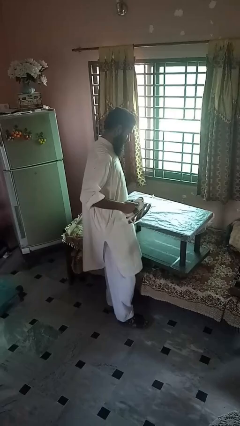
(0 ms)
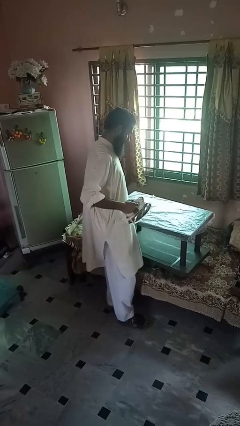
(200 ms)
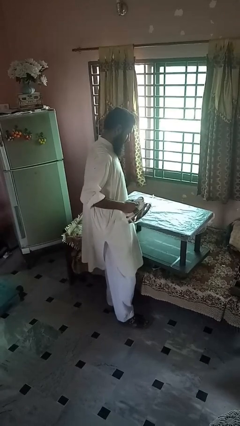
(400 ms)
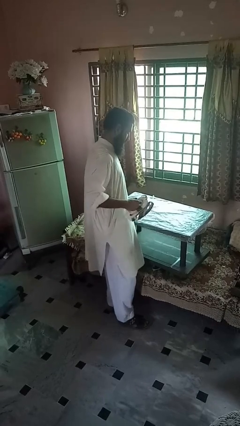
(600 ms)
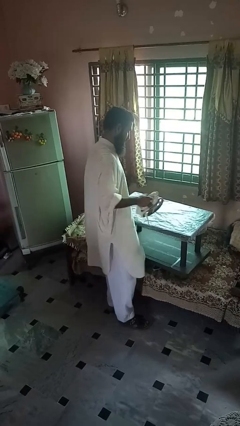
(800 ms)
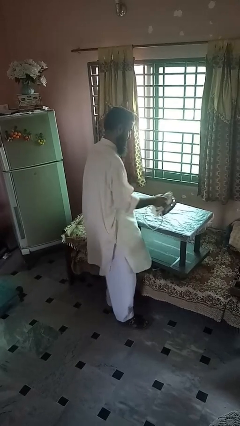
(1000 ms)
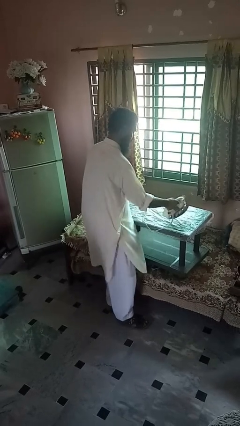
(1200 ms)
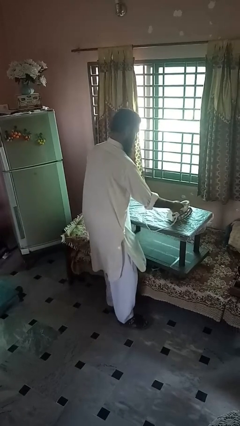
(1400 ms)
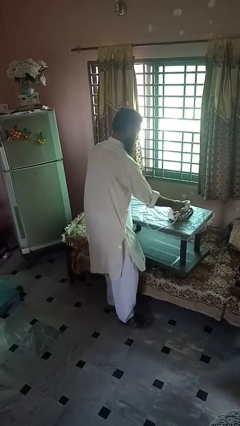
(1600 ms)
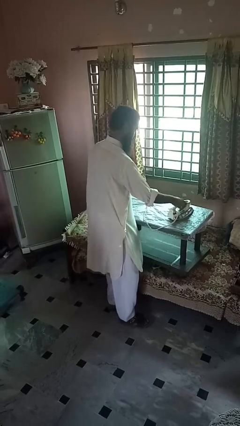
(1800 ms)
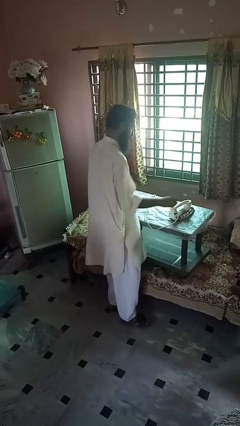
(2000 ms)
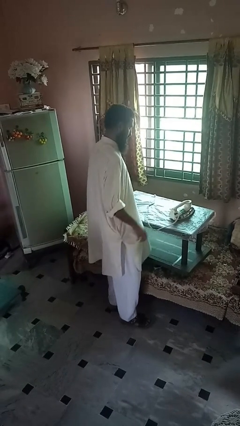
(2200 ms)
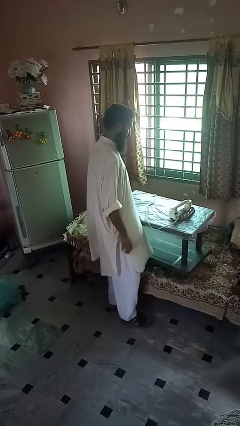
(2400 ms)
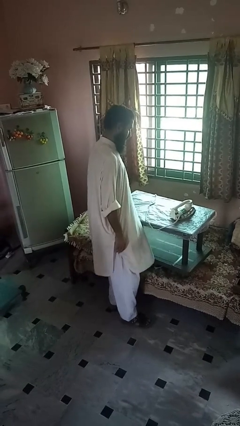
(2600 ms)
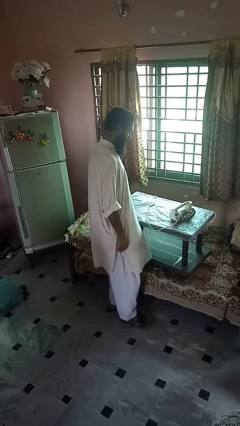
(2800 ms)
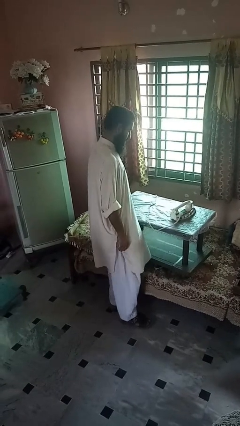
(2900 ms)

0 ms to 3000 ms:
person puts down object on countertop

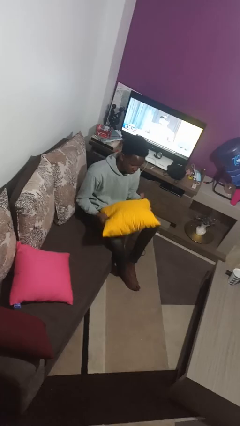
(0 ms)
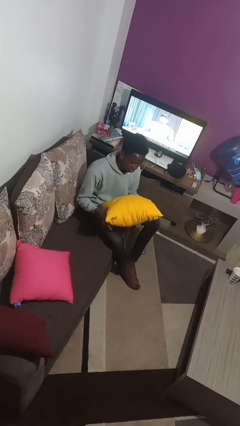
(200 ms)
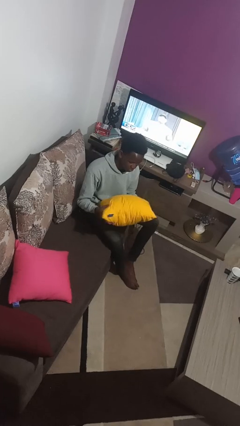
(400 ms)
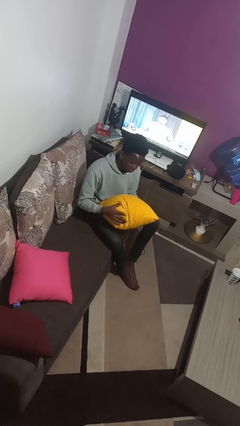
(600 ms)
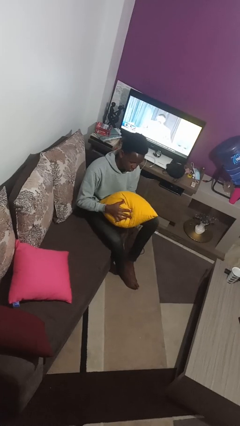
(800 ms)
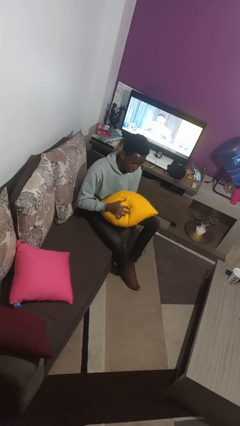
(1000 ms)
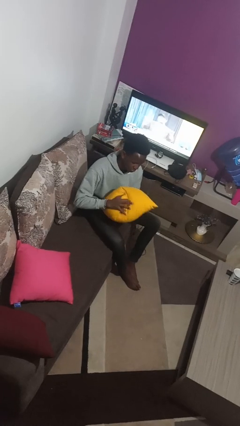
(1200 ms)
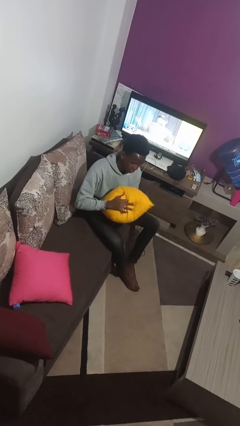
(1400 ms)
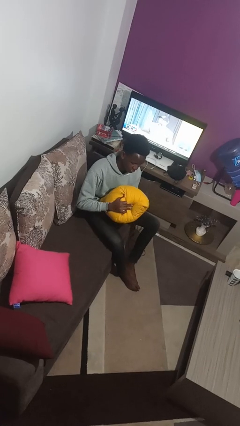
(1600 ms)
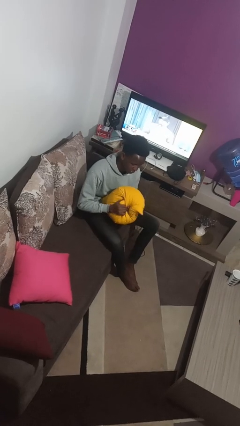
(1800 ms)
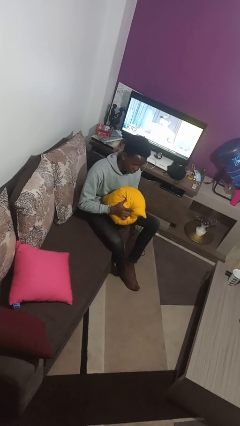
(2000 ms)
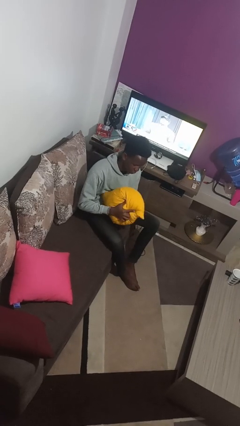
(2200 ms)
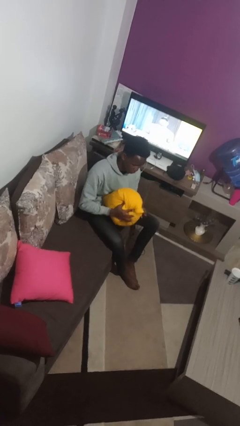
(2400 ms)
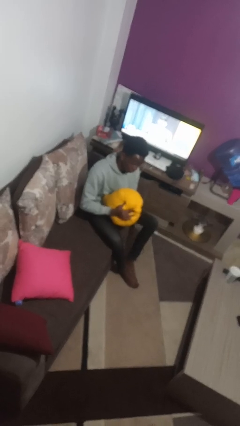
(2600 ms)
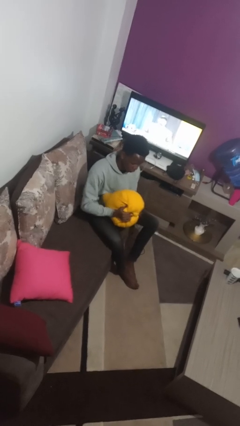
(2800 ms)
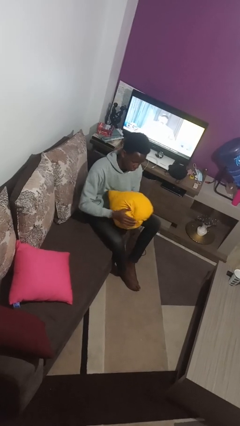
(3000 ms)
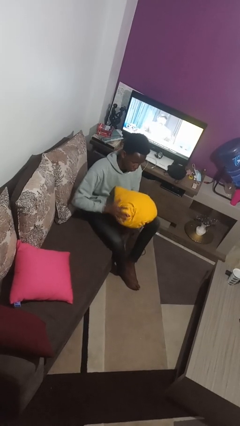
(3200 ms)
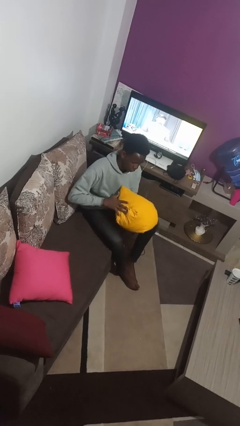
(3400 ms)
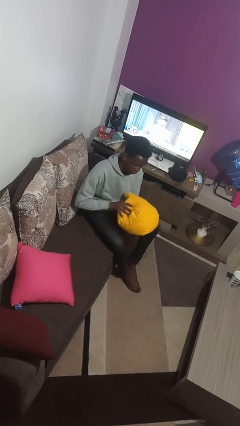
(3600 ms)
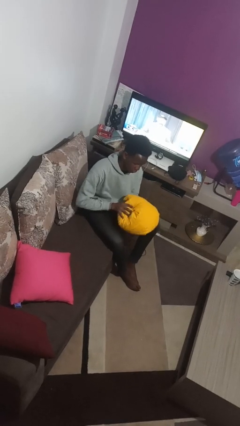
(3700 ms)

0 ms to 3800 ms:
person squeezes object

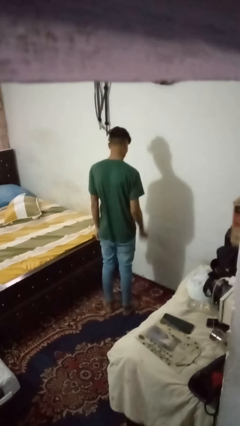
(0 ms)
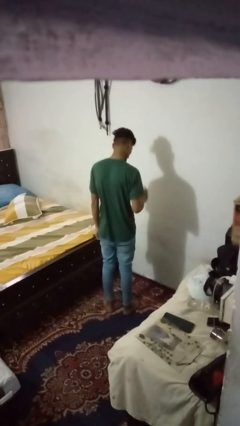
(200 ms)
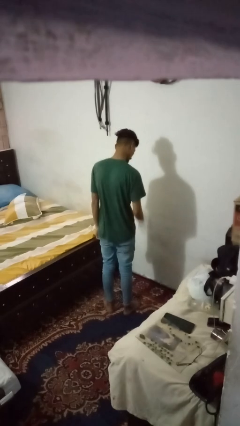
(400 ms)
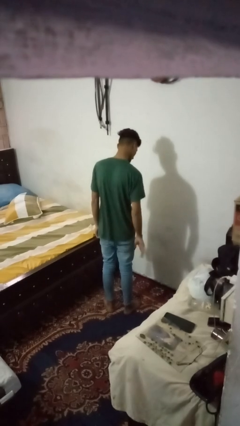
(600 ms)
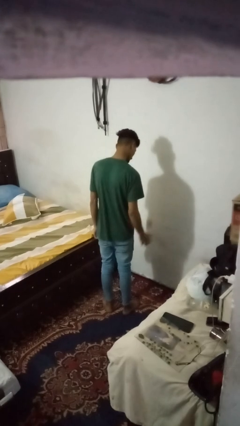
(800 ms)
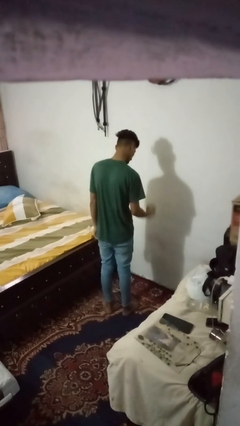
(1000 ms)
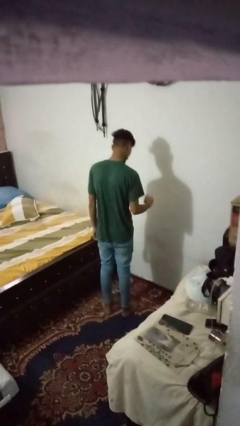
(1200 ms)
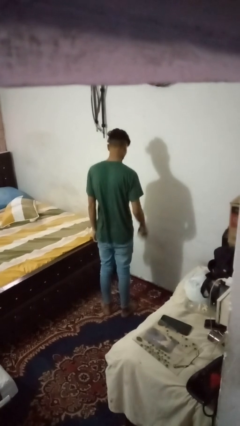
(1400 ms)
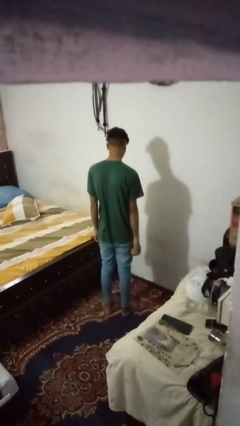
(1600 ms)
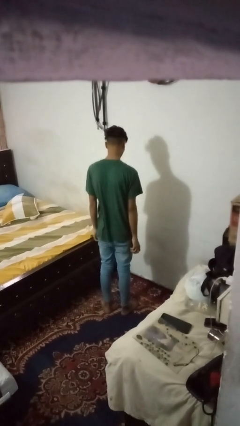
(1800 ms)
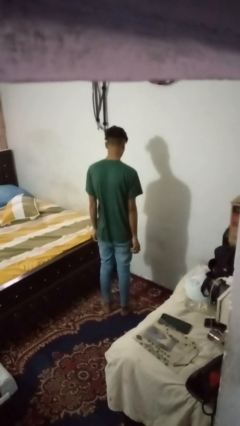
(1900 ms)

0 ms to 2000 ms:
person bounces ball on floor

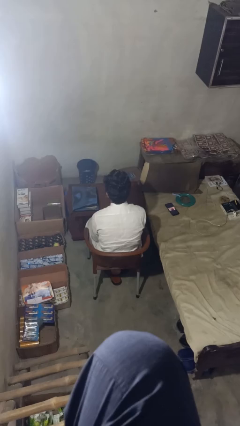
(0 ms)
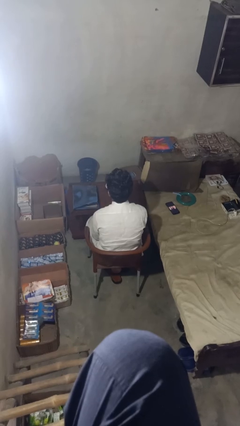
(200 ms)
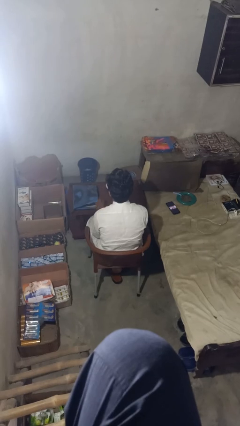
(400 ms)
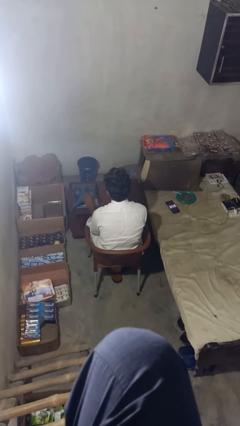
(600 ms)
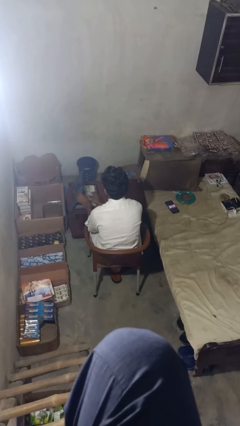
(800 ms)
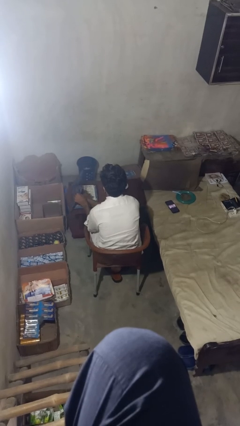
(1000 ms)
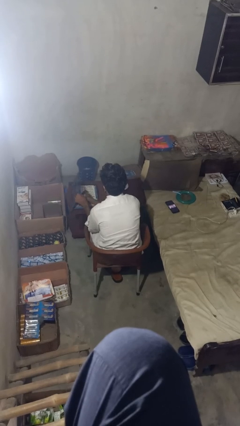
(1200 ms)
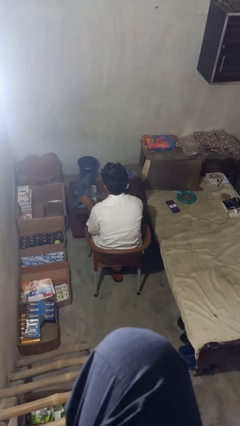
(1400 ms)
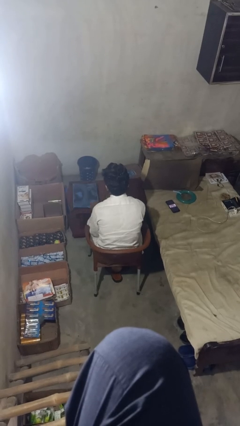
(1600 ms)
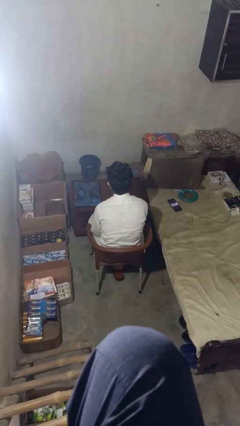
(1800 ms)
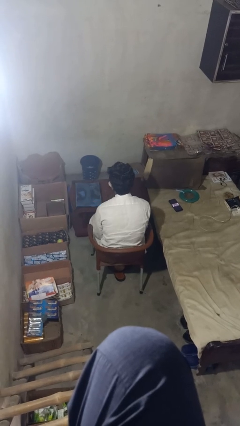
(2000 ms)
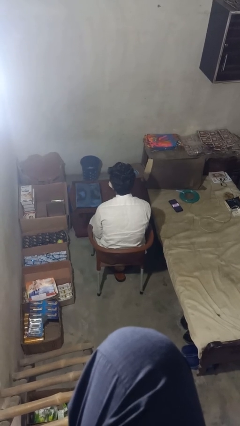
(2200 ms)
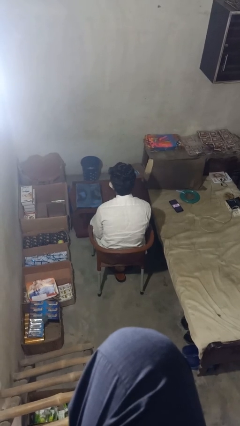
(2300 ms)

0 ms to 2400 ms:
person puts object into bag

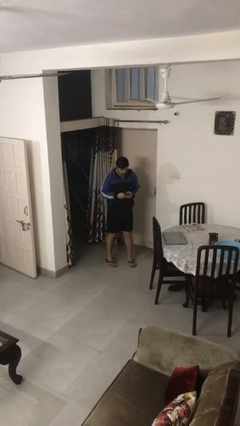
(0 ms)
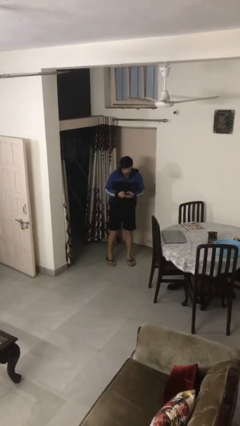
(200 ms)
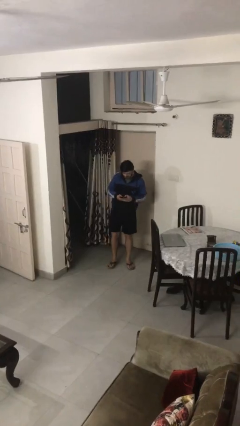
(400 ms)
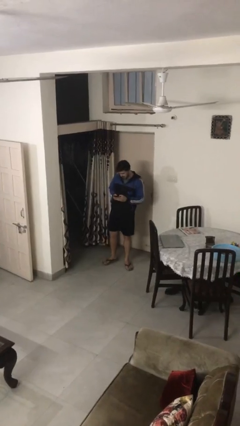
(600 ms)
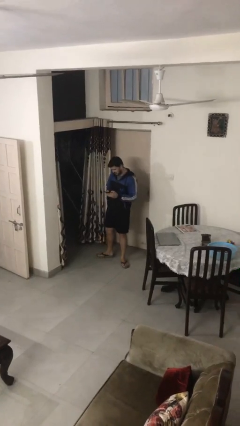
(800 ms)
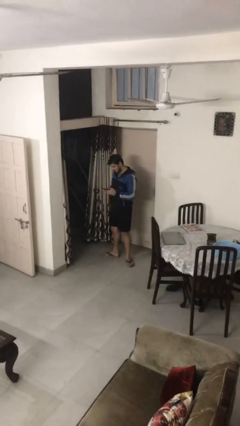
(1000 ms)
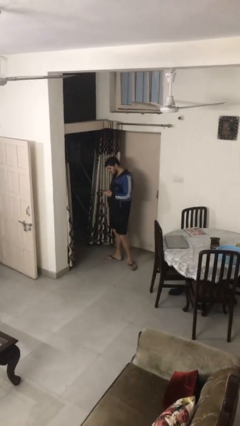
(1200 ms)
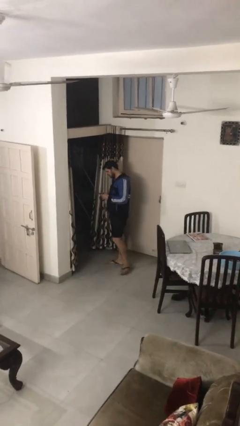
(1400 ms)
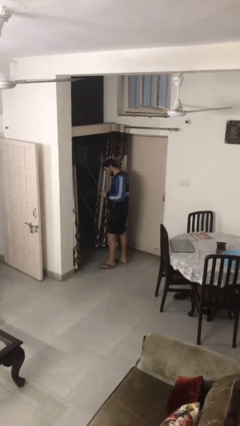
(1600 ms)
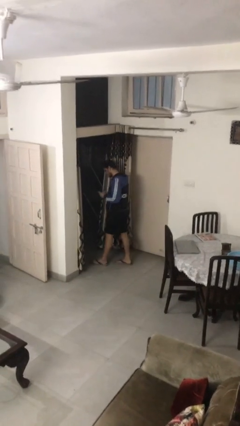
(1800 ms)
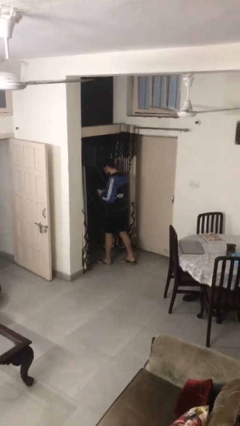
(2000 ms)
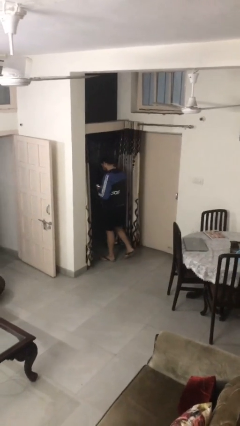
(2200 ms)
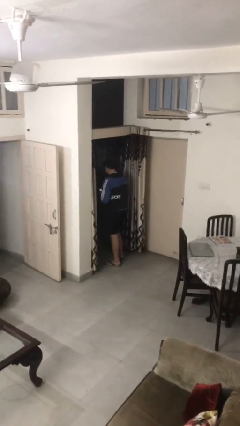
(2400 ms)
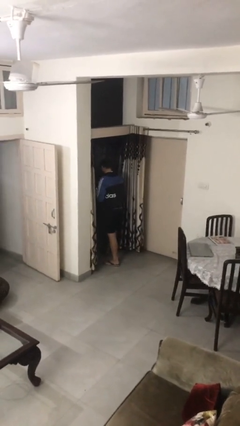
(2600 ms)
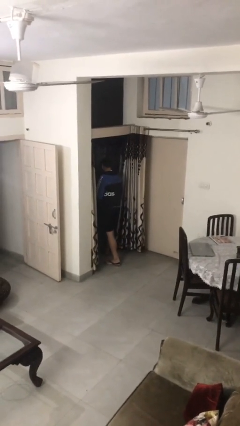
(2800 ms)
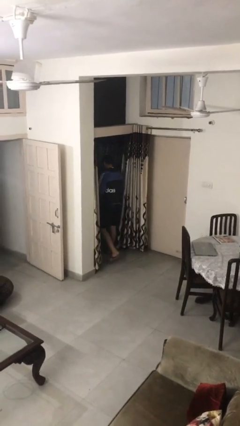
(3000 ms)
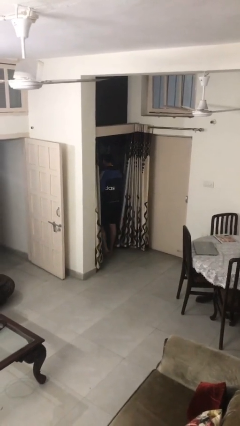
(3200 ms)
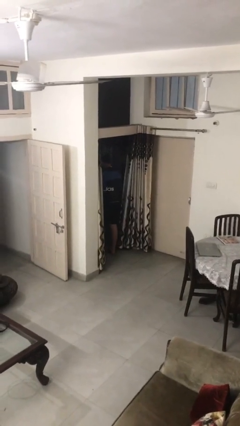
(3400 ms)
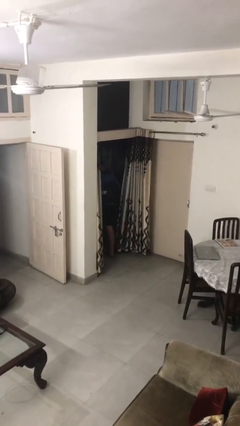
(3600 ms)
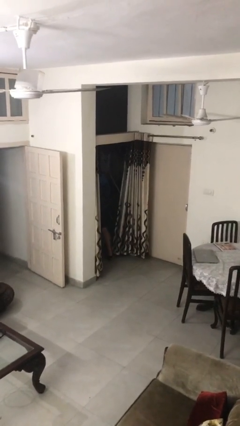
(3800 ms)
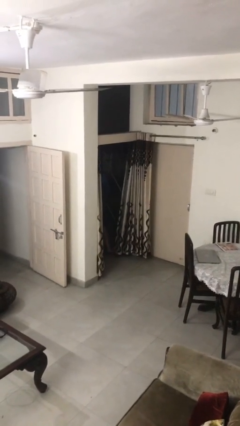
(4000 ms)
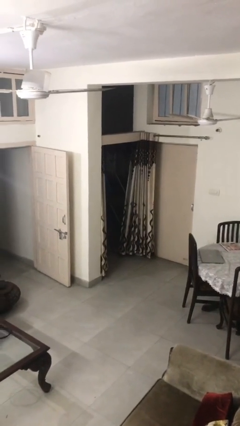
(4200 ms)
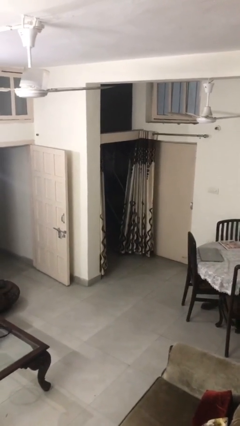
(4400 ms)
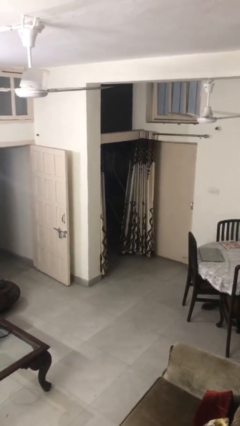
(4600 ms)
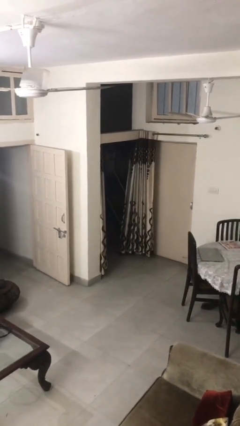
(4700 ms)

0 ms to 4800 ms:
person exits scene through structure

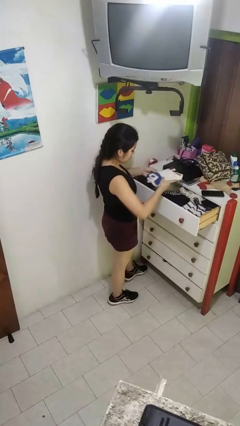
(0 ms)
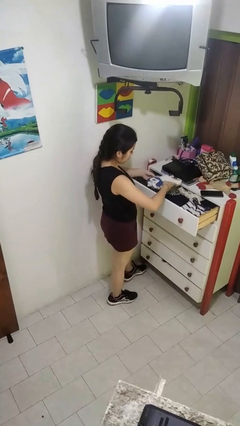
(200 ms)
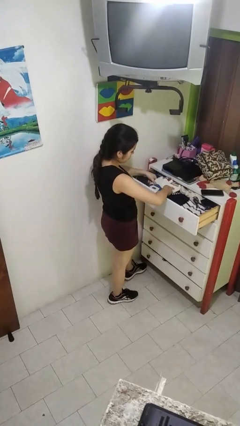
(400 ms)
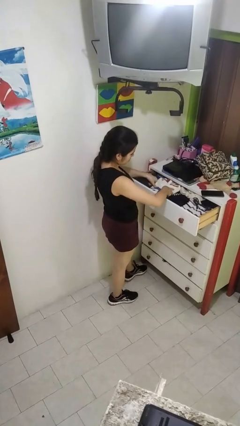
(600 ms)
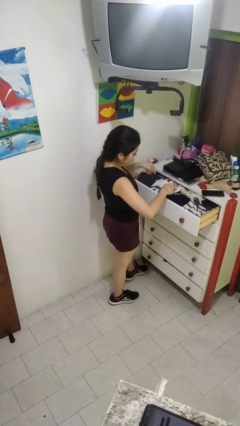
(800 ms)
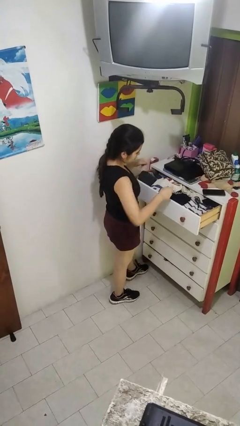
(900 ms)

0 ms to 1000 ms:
person puts clothes into dresser

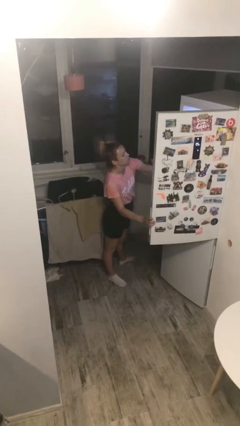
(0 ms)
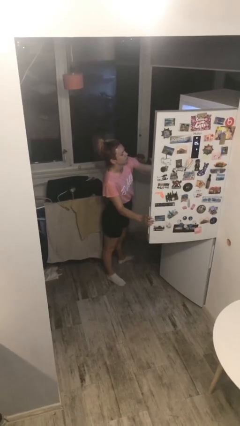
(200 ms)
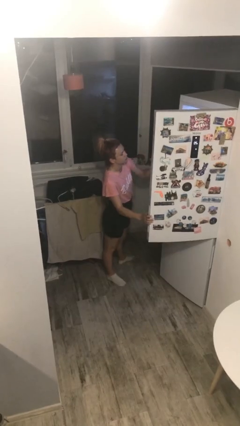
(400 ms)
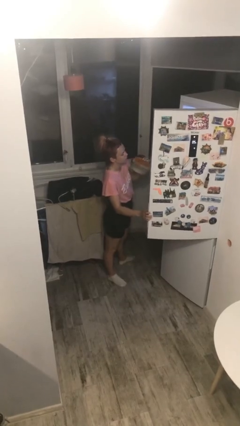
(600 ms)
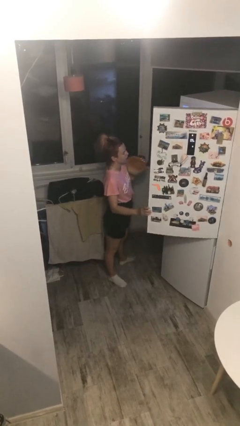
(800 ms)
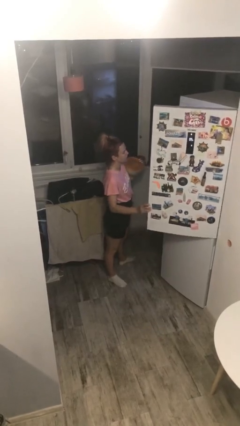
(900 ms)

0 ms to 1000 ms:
person takes object from refrigerator
